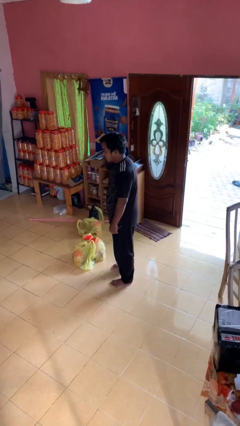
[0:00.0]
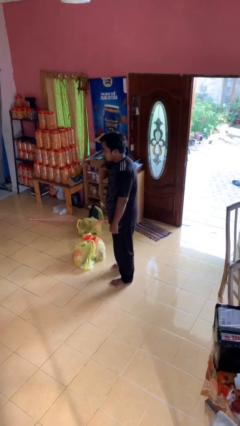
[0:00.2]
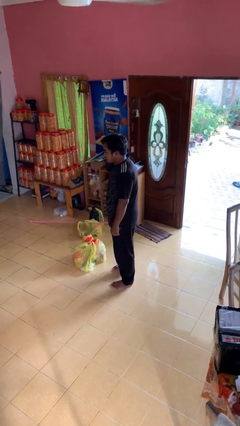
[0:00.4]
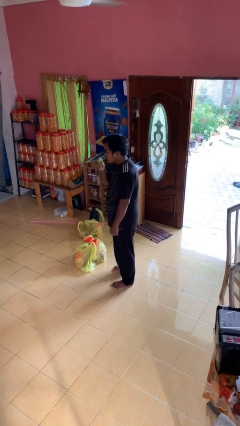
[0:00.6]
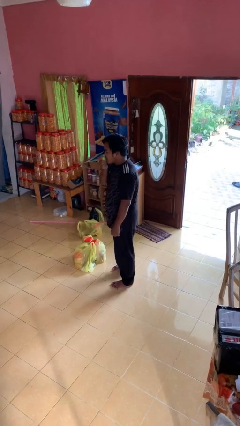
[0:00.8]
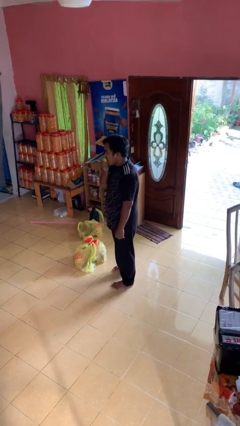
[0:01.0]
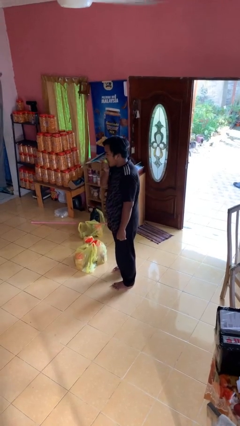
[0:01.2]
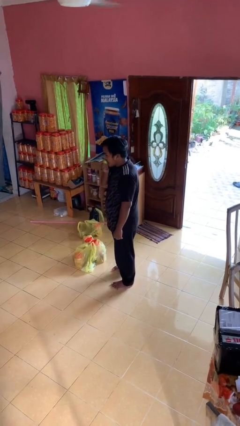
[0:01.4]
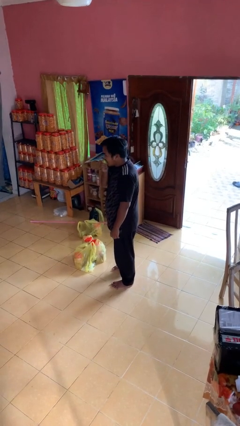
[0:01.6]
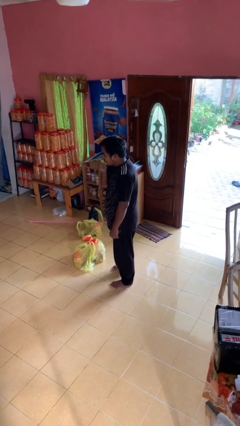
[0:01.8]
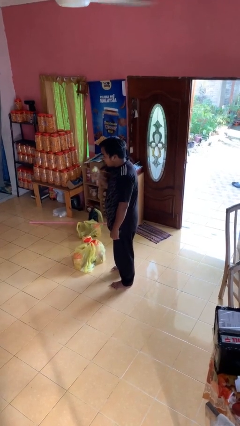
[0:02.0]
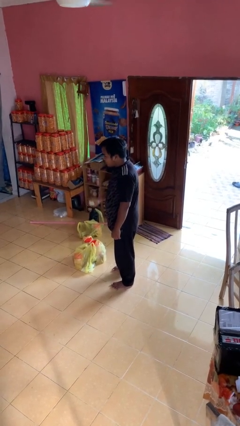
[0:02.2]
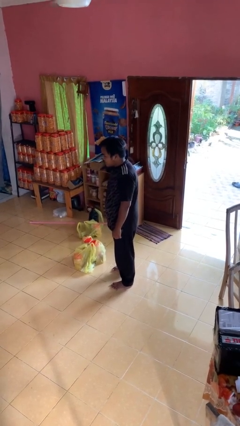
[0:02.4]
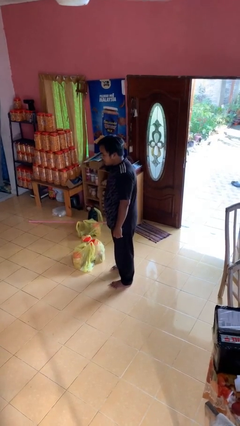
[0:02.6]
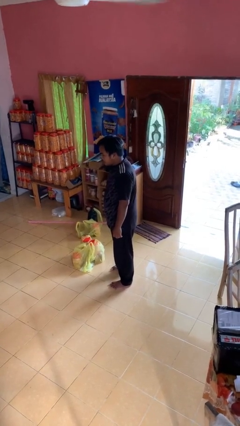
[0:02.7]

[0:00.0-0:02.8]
person eats apple

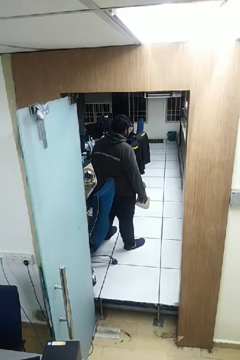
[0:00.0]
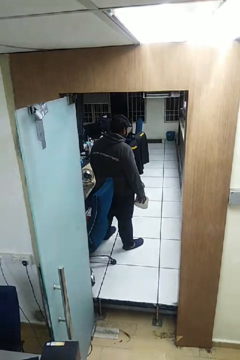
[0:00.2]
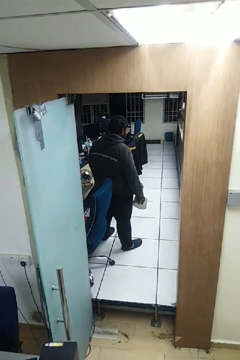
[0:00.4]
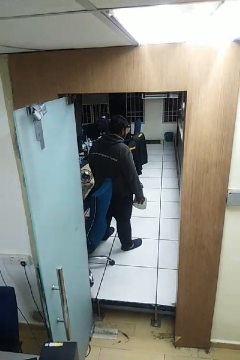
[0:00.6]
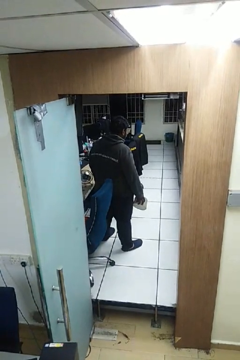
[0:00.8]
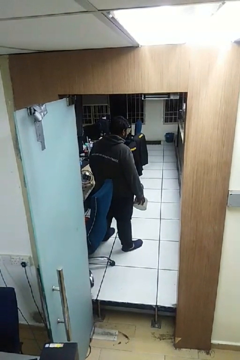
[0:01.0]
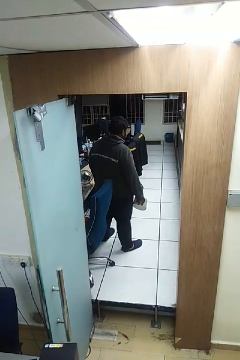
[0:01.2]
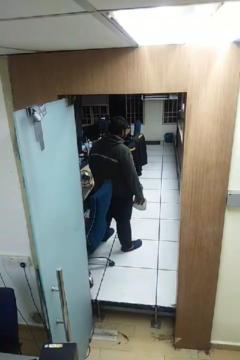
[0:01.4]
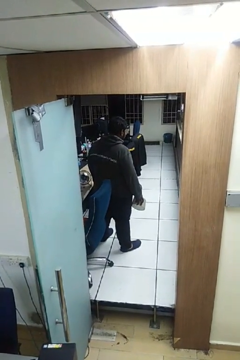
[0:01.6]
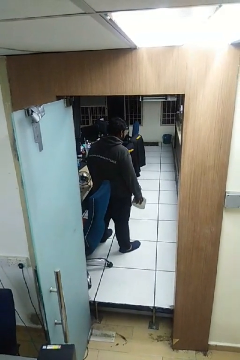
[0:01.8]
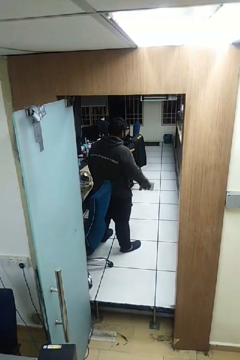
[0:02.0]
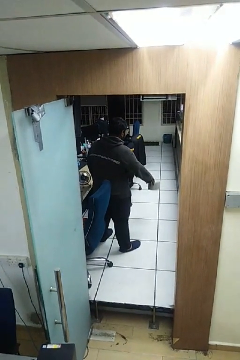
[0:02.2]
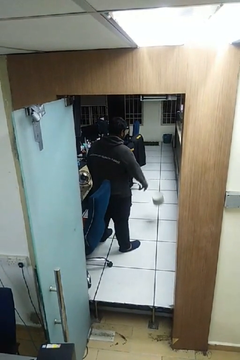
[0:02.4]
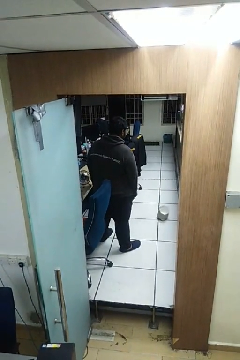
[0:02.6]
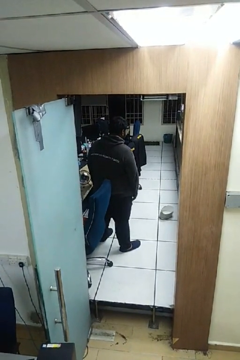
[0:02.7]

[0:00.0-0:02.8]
person throws object to ground

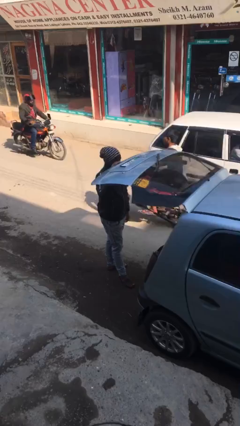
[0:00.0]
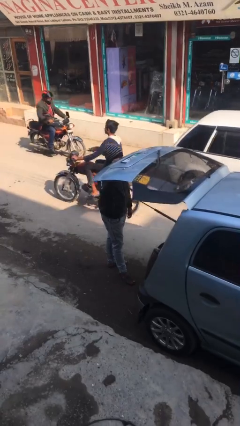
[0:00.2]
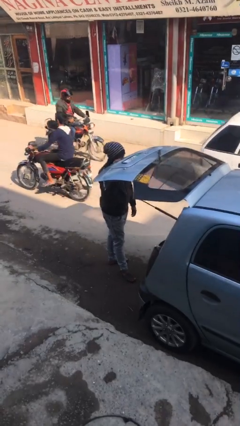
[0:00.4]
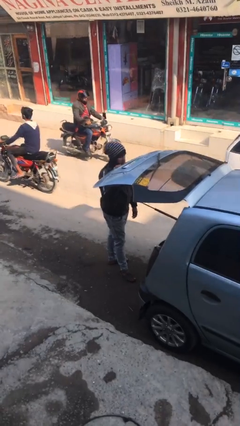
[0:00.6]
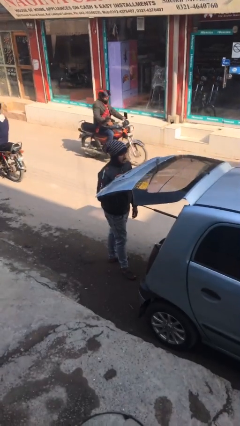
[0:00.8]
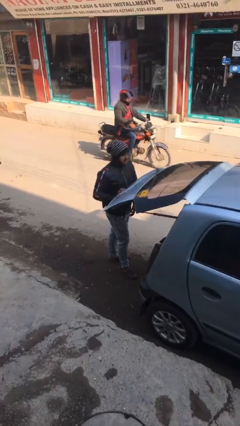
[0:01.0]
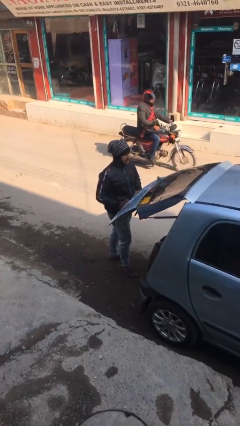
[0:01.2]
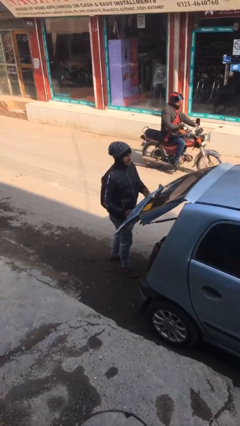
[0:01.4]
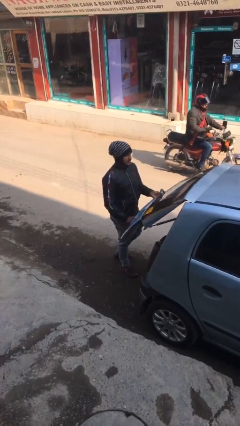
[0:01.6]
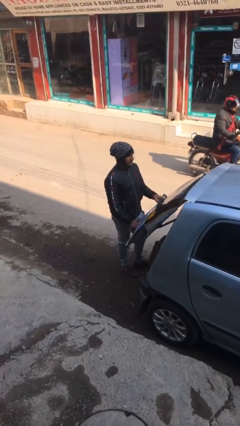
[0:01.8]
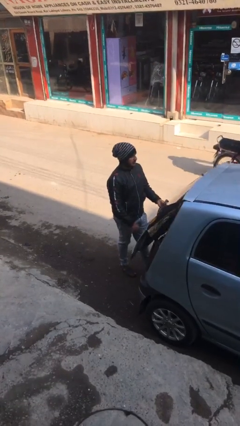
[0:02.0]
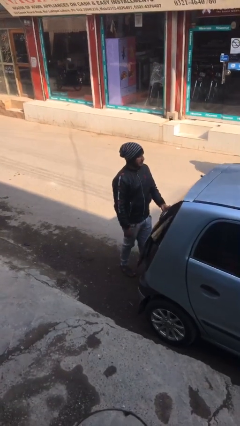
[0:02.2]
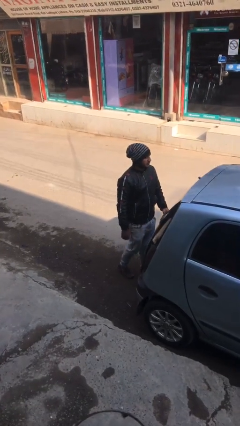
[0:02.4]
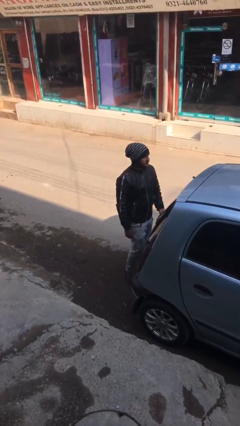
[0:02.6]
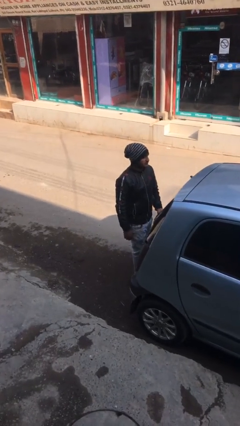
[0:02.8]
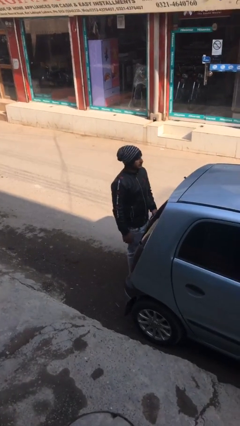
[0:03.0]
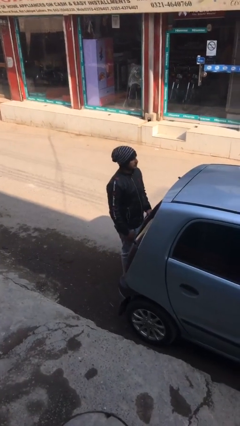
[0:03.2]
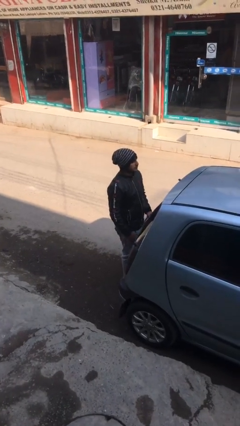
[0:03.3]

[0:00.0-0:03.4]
person closes car trunk

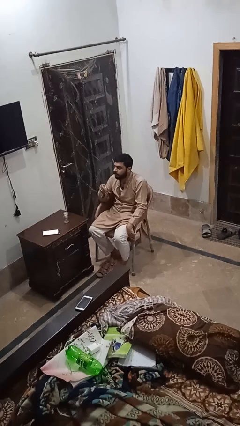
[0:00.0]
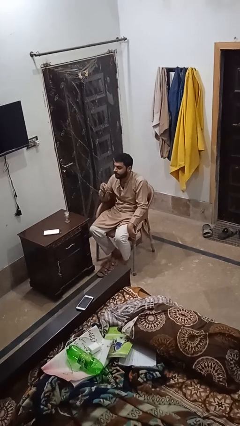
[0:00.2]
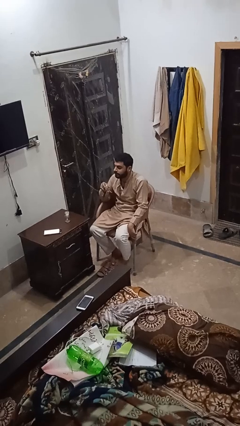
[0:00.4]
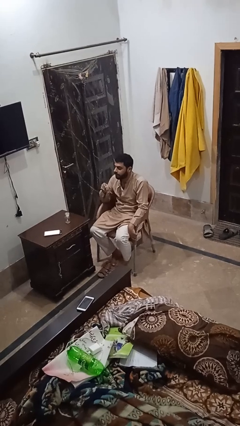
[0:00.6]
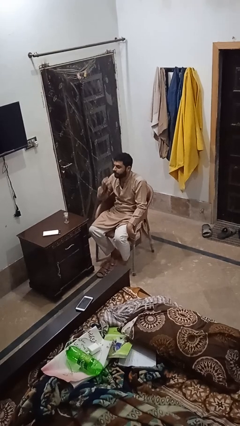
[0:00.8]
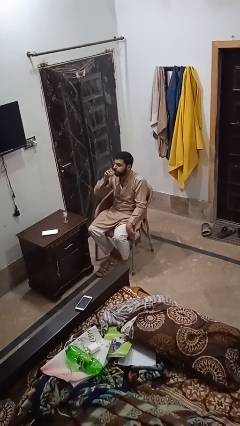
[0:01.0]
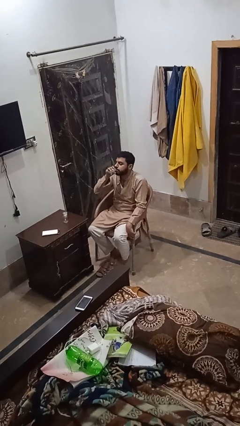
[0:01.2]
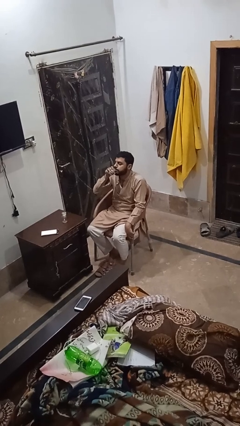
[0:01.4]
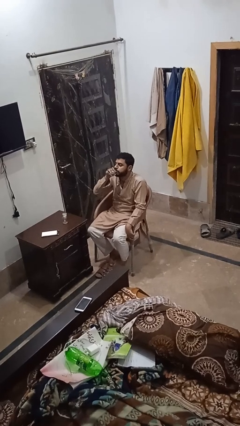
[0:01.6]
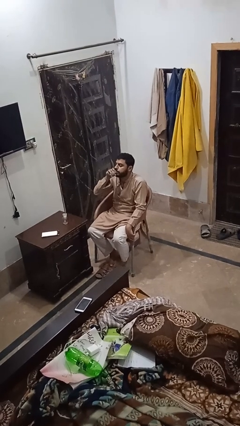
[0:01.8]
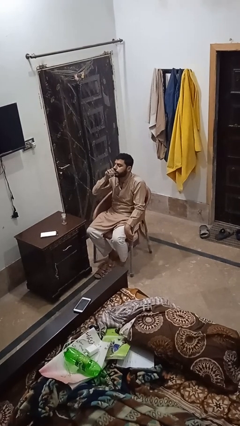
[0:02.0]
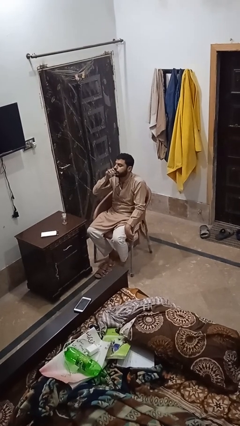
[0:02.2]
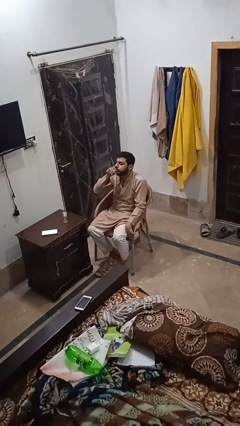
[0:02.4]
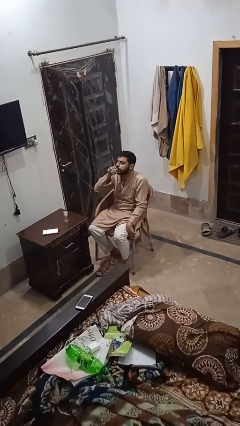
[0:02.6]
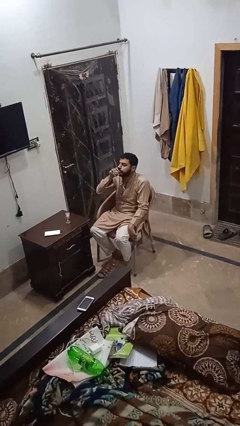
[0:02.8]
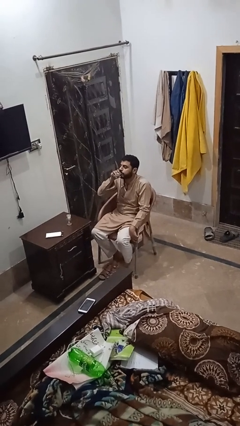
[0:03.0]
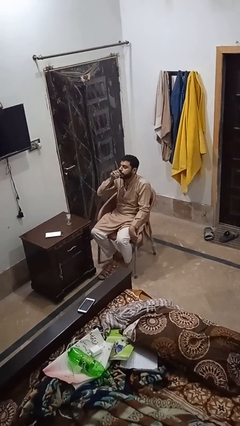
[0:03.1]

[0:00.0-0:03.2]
person drinks from shotglass

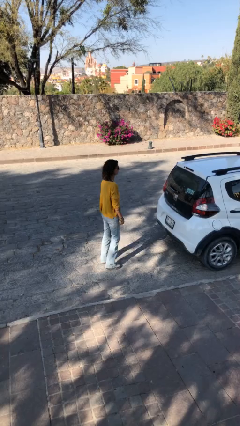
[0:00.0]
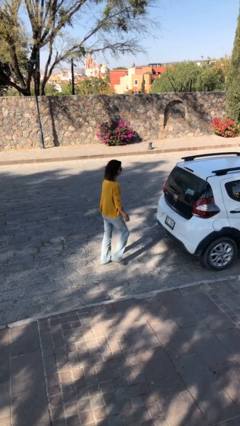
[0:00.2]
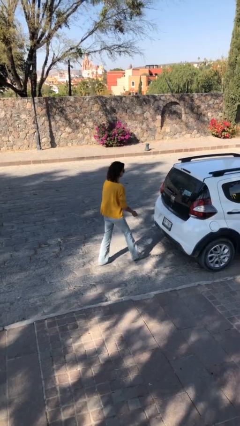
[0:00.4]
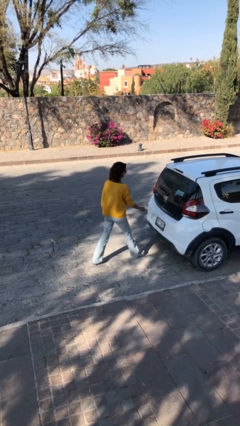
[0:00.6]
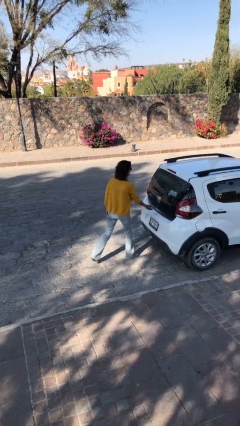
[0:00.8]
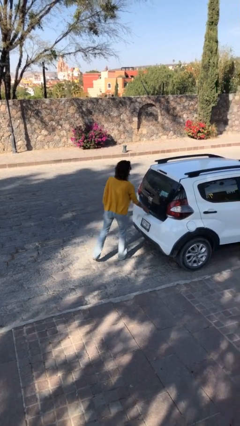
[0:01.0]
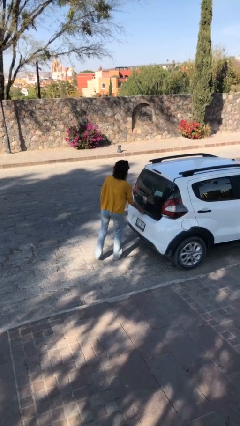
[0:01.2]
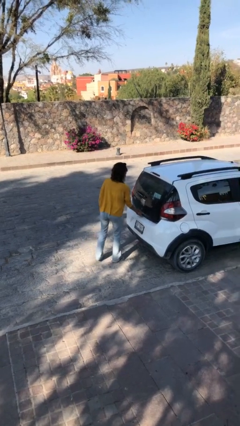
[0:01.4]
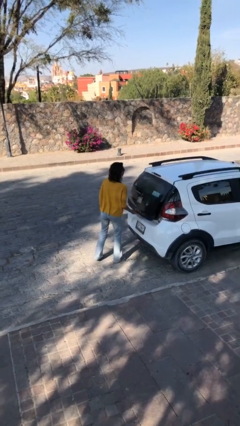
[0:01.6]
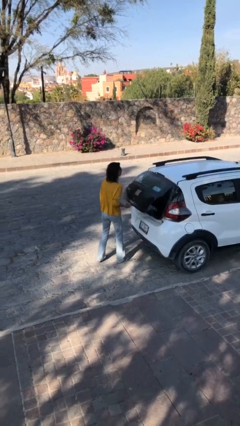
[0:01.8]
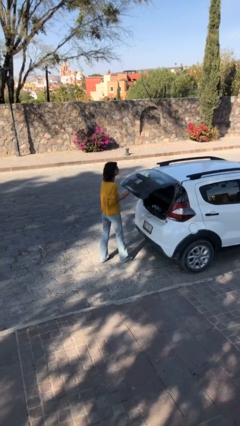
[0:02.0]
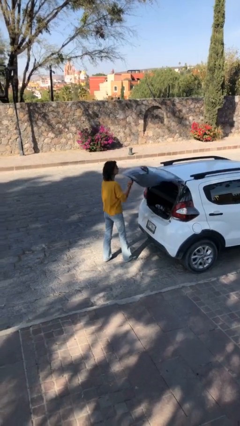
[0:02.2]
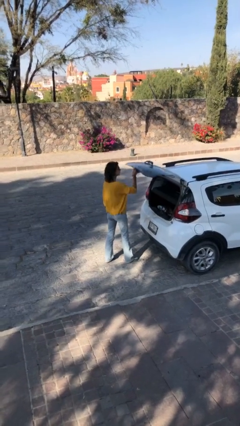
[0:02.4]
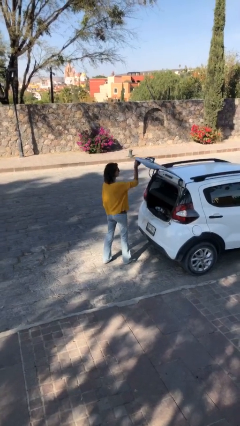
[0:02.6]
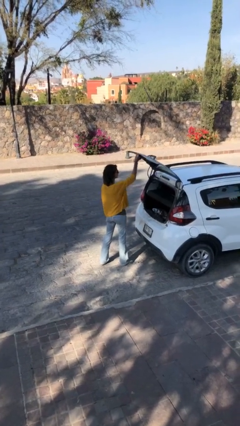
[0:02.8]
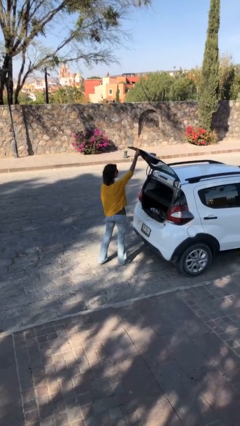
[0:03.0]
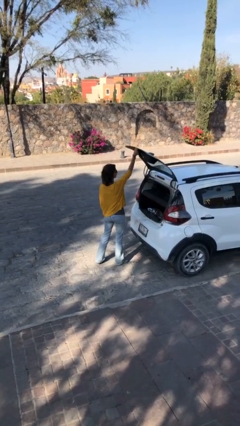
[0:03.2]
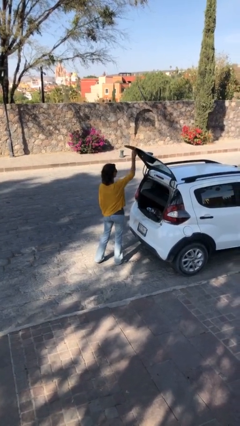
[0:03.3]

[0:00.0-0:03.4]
person opens car trunk

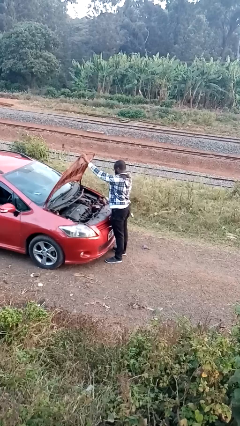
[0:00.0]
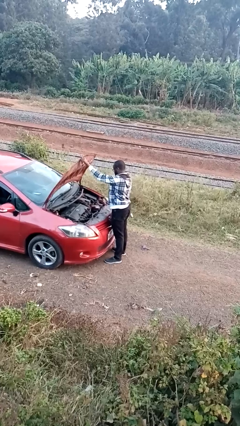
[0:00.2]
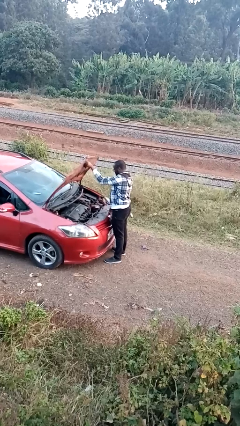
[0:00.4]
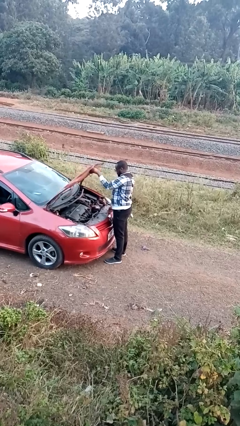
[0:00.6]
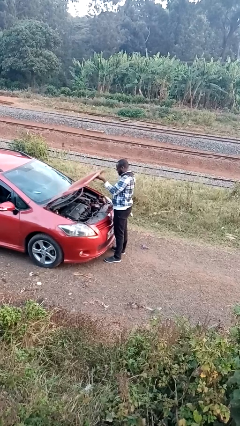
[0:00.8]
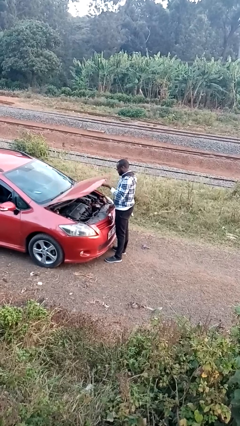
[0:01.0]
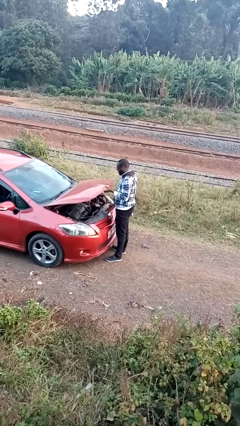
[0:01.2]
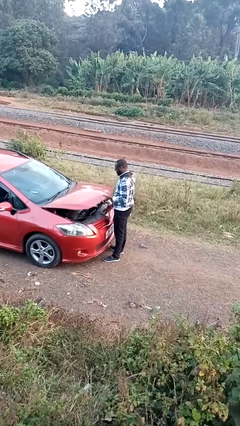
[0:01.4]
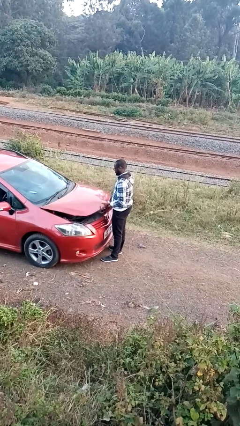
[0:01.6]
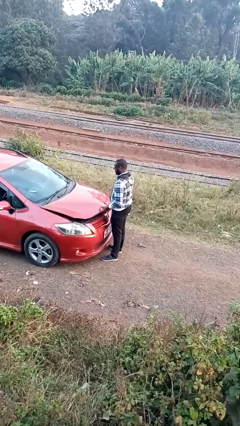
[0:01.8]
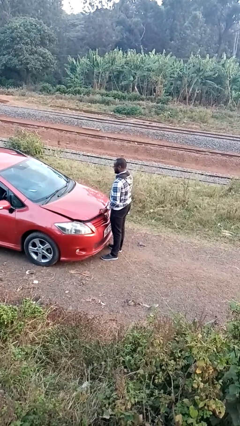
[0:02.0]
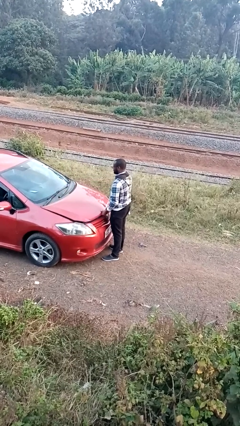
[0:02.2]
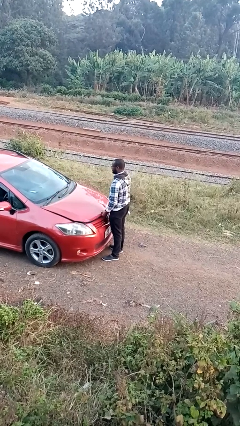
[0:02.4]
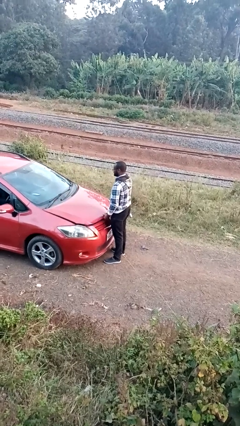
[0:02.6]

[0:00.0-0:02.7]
person closes car hood
